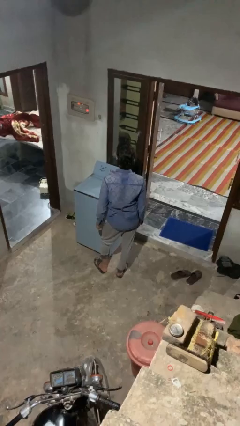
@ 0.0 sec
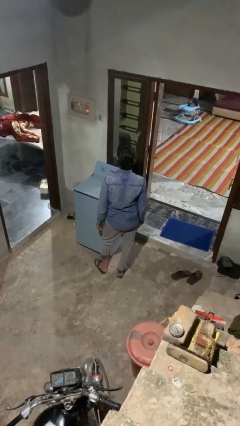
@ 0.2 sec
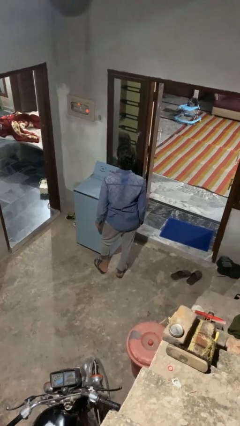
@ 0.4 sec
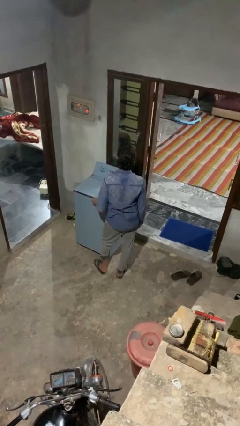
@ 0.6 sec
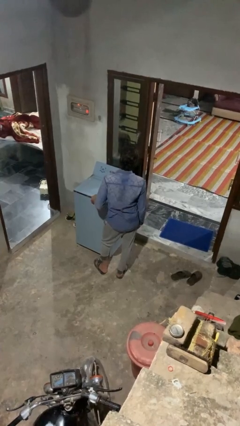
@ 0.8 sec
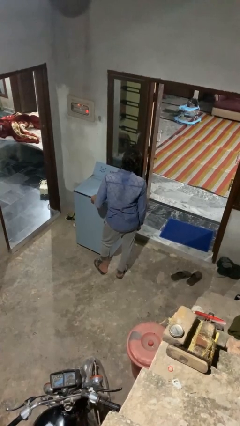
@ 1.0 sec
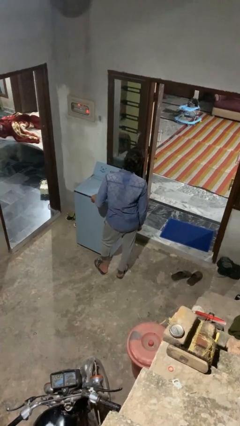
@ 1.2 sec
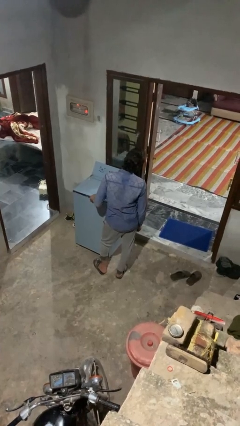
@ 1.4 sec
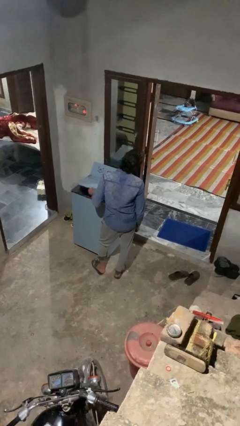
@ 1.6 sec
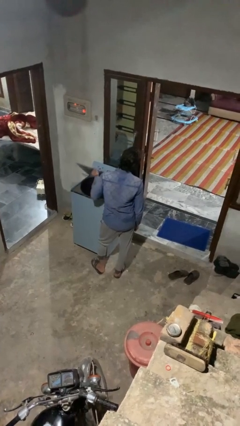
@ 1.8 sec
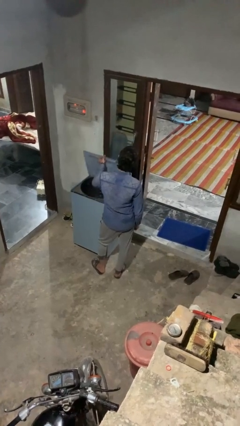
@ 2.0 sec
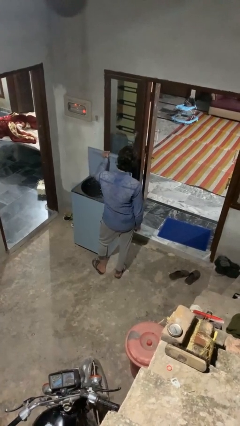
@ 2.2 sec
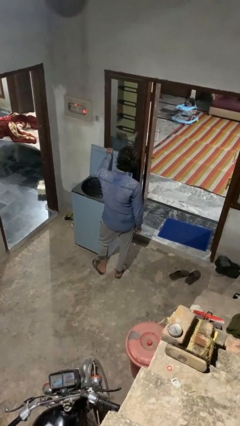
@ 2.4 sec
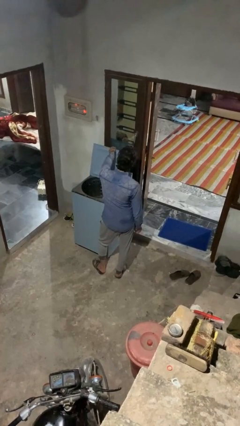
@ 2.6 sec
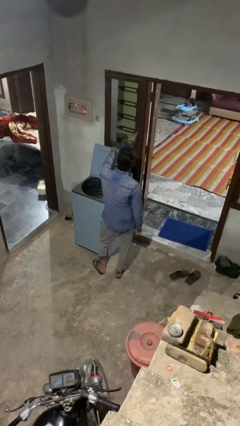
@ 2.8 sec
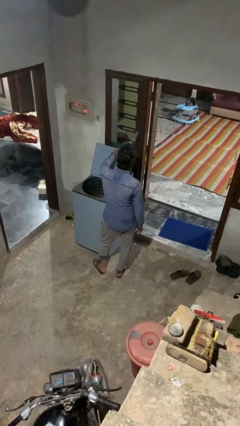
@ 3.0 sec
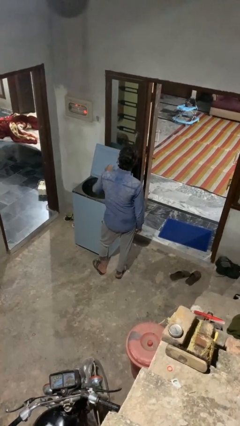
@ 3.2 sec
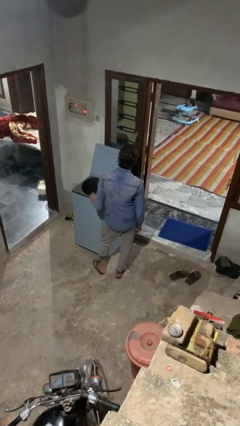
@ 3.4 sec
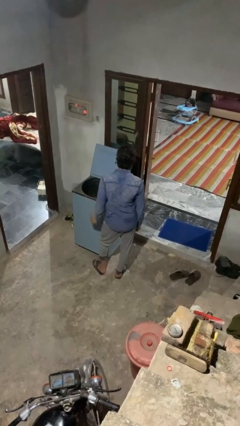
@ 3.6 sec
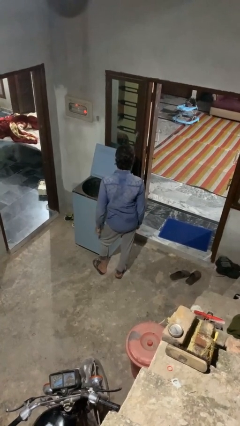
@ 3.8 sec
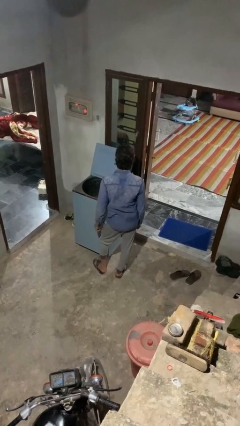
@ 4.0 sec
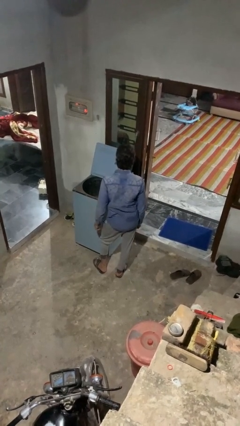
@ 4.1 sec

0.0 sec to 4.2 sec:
person opens clothes washer

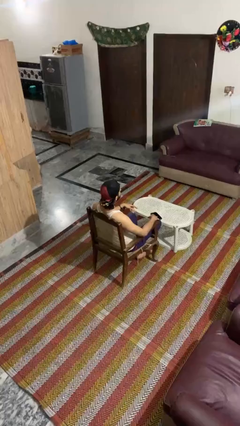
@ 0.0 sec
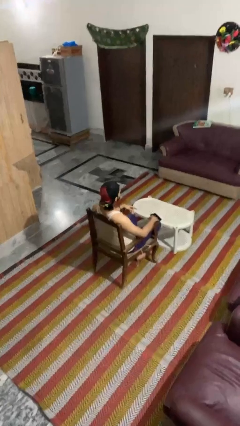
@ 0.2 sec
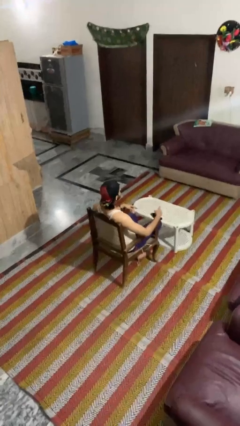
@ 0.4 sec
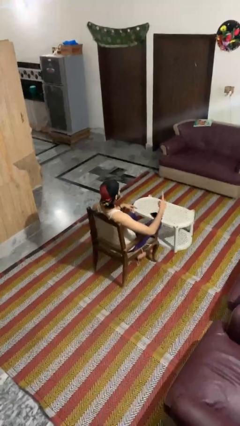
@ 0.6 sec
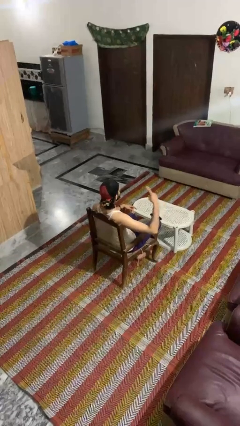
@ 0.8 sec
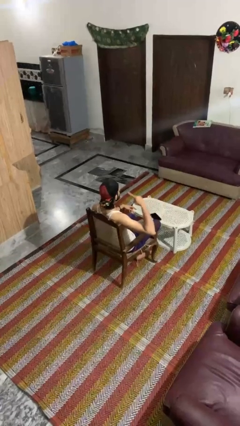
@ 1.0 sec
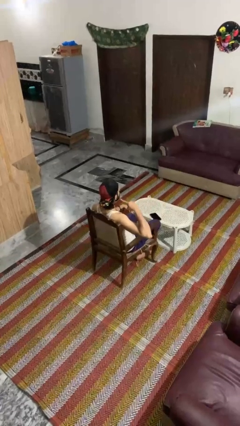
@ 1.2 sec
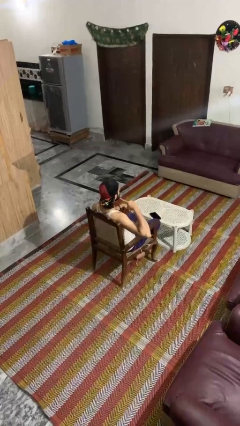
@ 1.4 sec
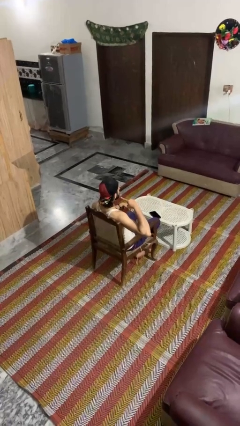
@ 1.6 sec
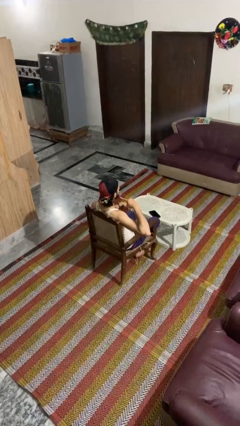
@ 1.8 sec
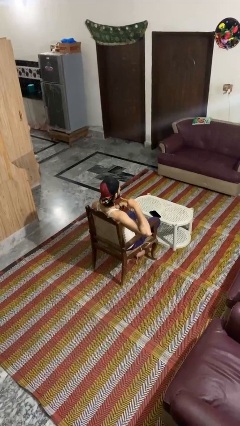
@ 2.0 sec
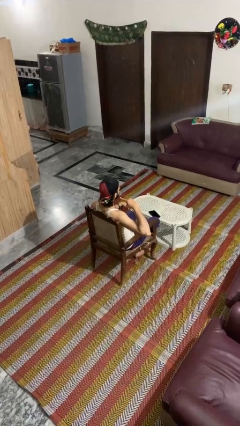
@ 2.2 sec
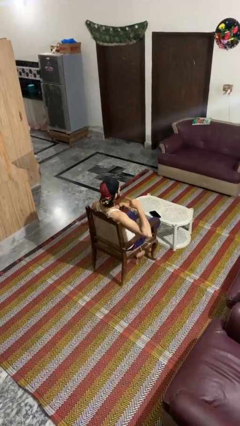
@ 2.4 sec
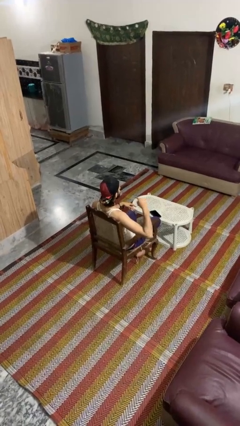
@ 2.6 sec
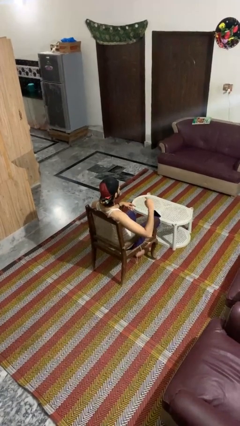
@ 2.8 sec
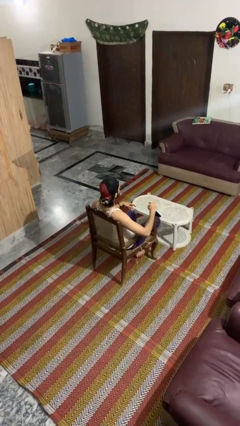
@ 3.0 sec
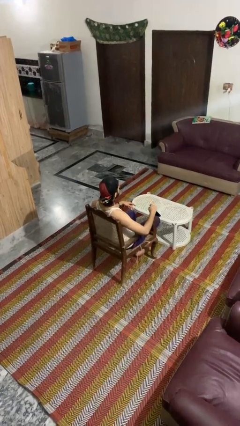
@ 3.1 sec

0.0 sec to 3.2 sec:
person gestures listen closely

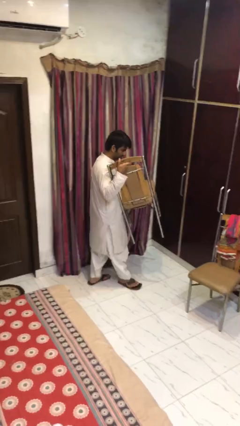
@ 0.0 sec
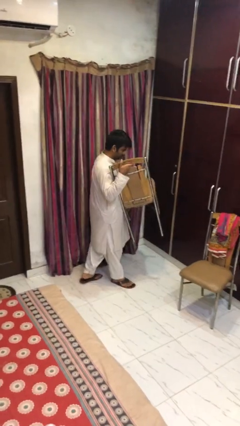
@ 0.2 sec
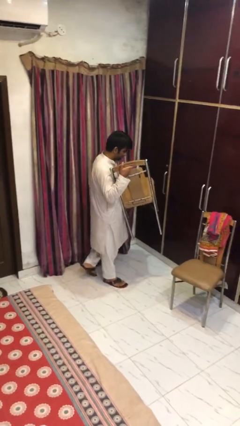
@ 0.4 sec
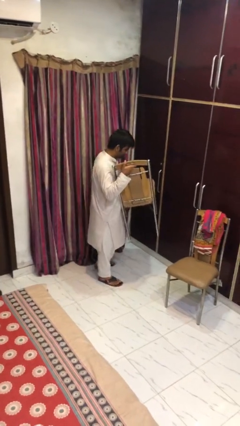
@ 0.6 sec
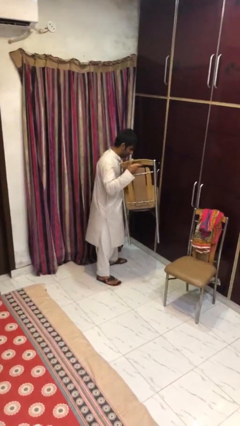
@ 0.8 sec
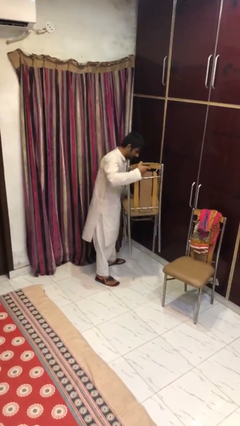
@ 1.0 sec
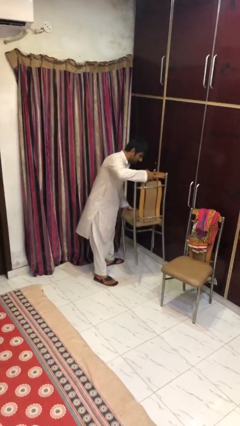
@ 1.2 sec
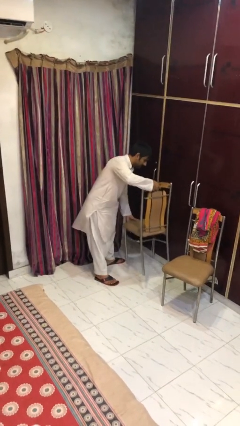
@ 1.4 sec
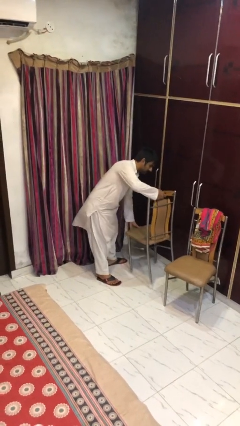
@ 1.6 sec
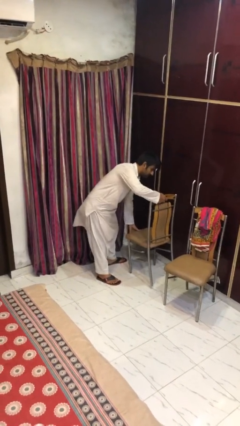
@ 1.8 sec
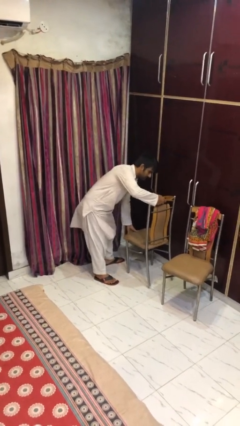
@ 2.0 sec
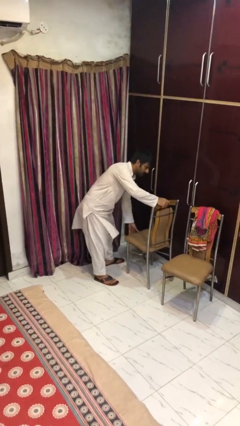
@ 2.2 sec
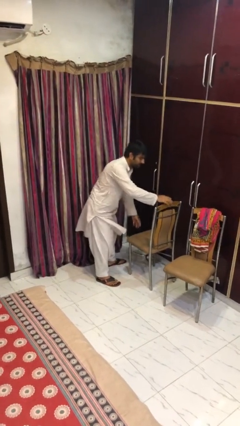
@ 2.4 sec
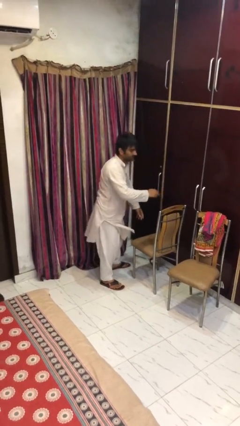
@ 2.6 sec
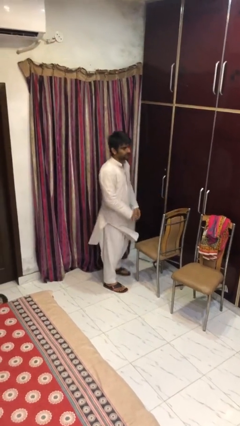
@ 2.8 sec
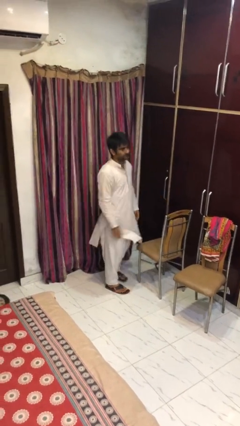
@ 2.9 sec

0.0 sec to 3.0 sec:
person puts down object on floor

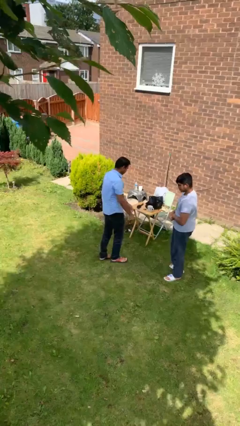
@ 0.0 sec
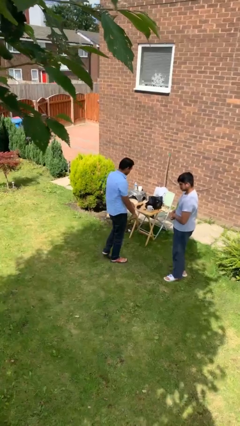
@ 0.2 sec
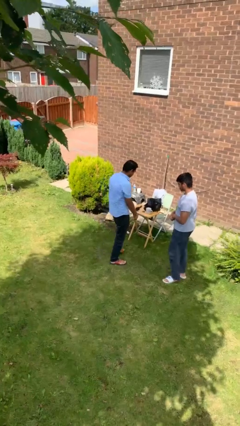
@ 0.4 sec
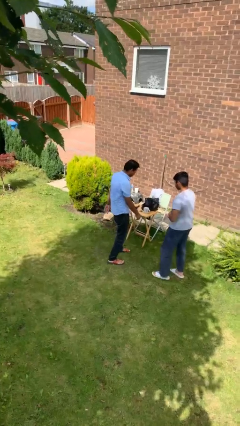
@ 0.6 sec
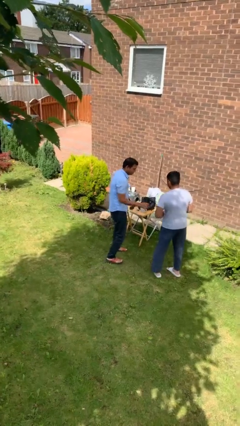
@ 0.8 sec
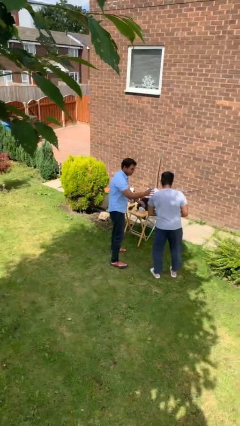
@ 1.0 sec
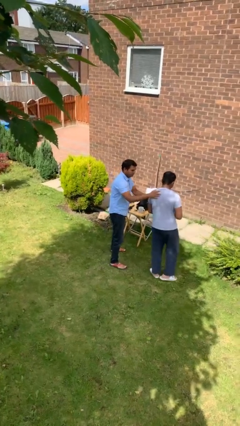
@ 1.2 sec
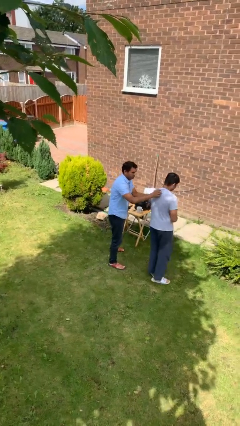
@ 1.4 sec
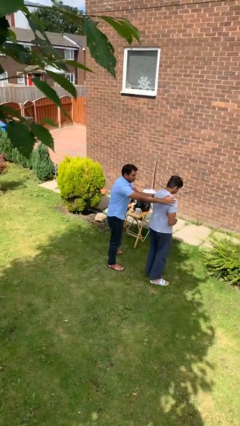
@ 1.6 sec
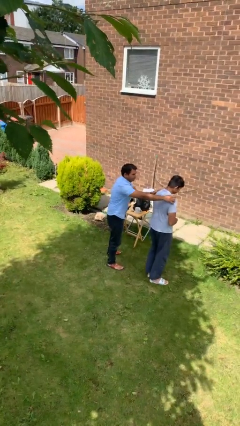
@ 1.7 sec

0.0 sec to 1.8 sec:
person grabs person by shoulder

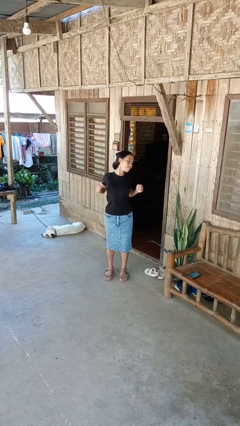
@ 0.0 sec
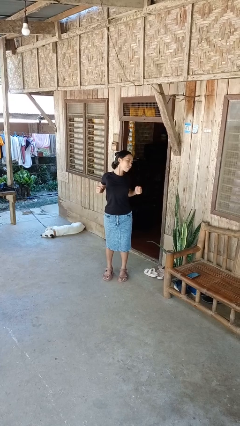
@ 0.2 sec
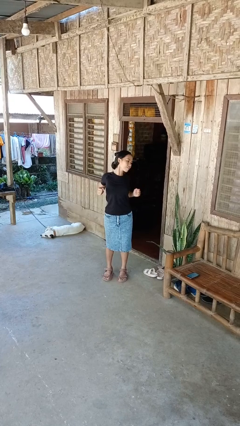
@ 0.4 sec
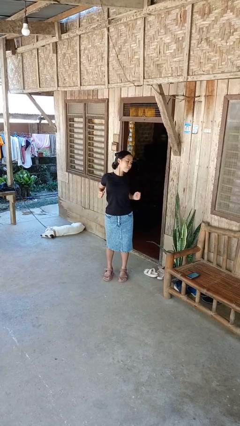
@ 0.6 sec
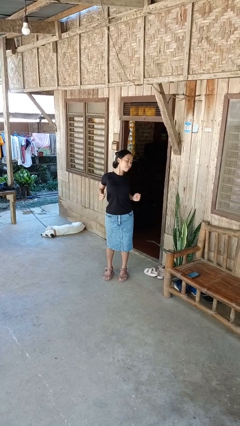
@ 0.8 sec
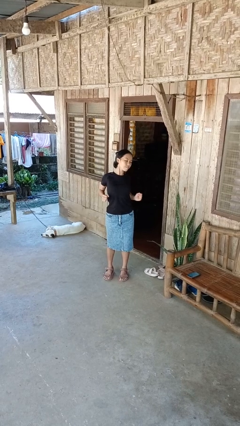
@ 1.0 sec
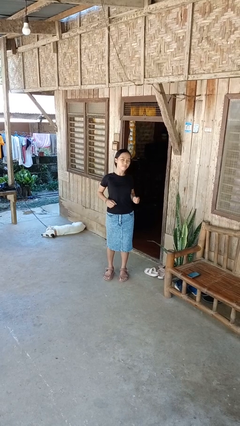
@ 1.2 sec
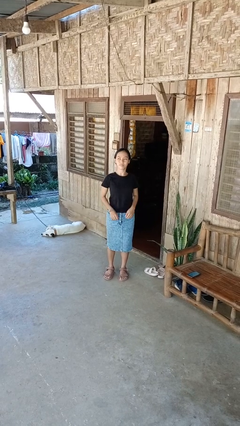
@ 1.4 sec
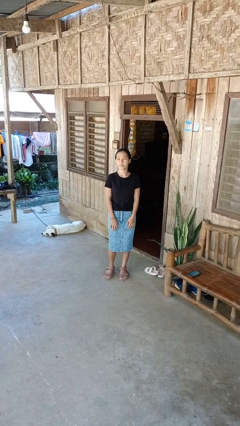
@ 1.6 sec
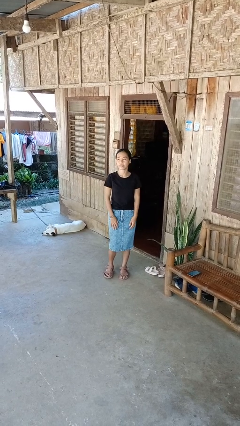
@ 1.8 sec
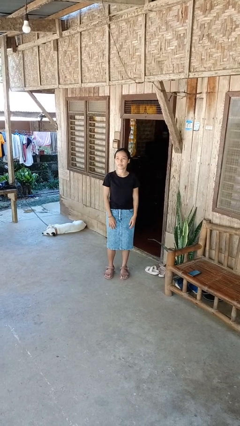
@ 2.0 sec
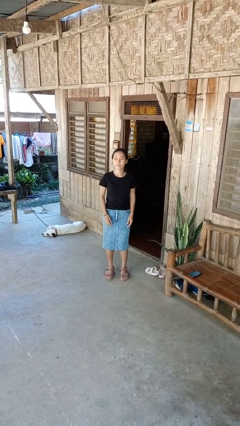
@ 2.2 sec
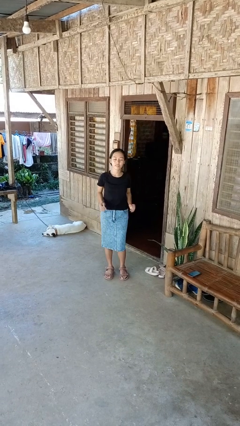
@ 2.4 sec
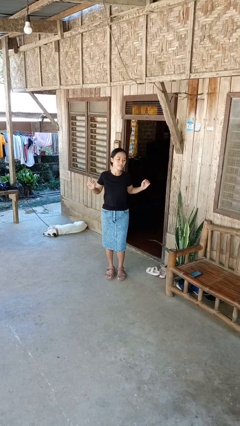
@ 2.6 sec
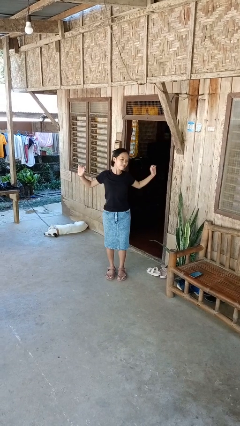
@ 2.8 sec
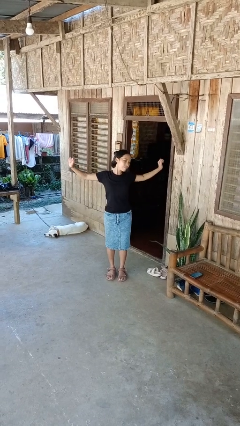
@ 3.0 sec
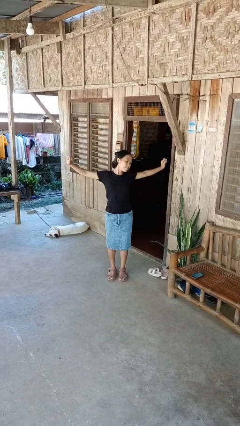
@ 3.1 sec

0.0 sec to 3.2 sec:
person stretches back

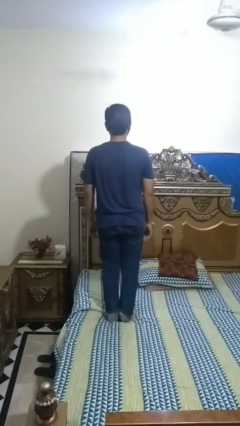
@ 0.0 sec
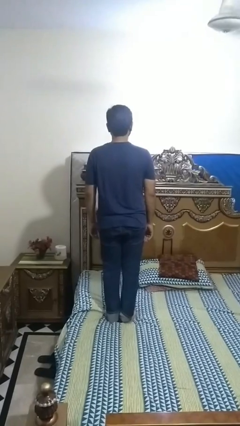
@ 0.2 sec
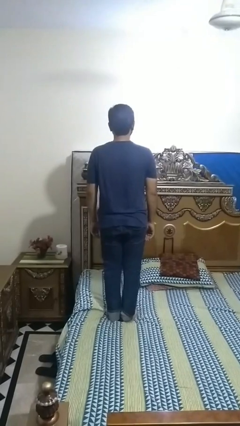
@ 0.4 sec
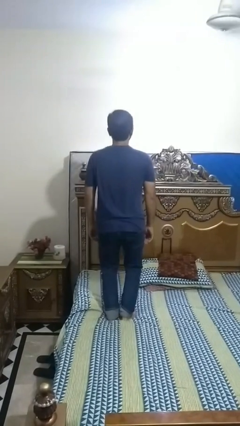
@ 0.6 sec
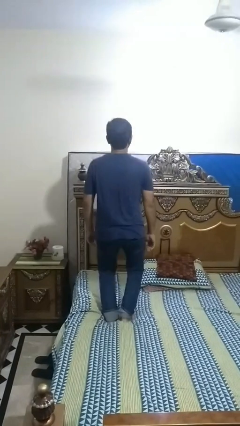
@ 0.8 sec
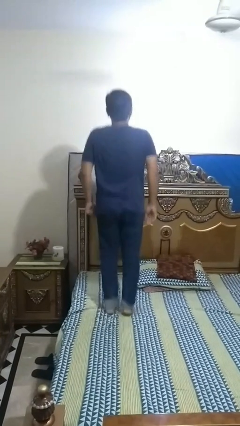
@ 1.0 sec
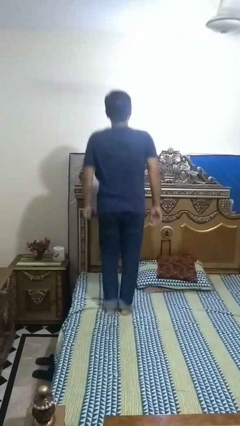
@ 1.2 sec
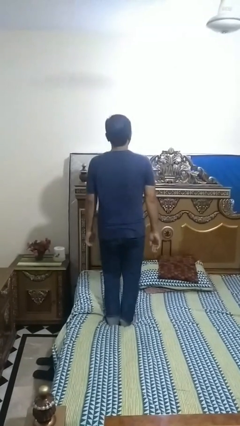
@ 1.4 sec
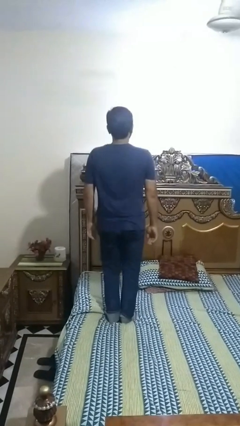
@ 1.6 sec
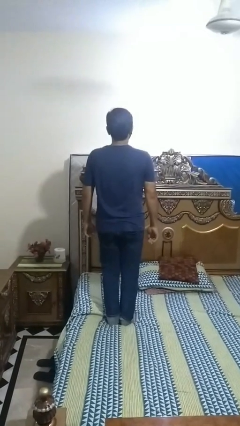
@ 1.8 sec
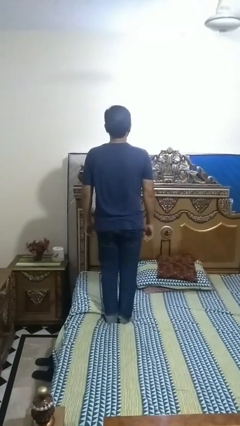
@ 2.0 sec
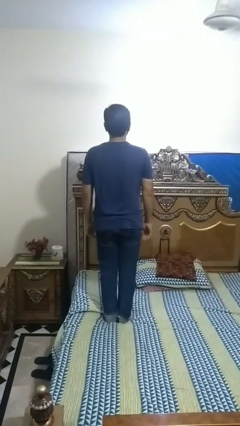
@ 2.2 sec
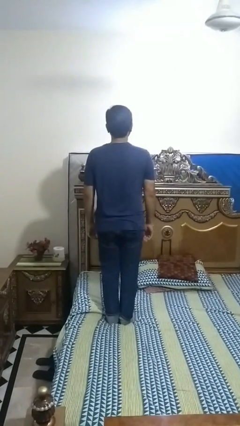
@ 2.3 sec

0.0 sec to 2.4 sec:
person jumps on bed
